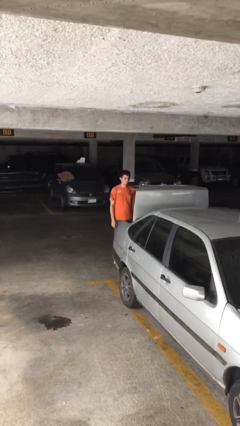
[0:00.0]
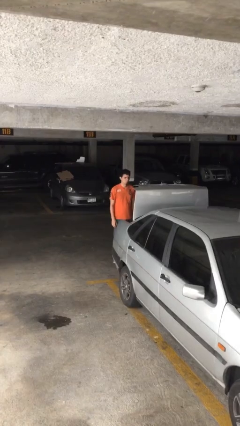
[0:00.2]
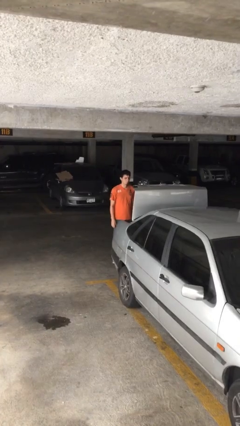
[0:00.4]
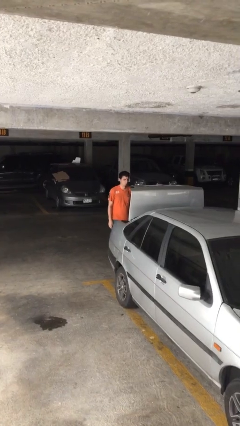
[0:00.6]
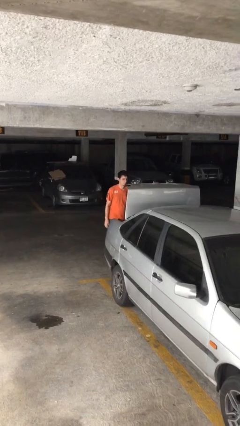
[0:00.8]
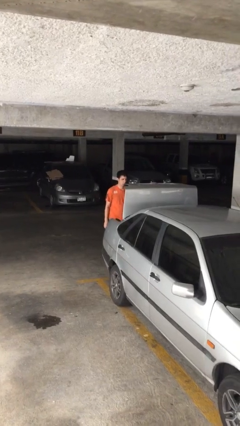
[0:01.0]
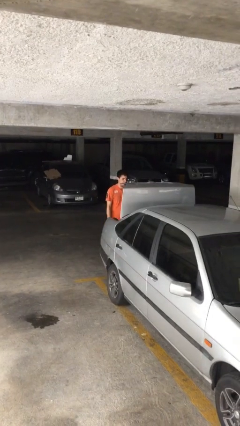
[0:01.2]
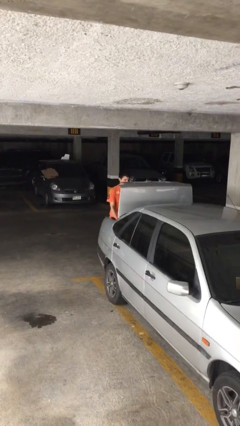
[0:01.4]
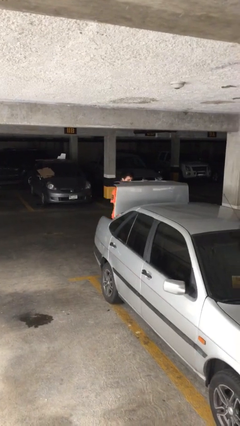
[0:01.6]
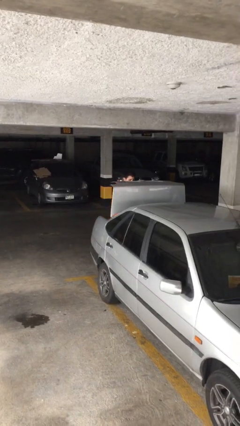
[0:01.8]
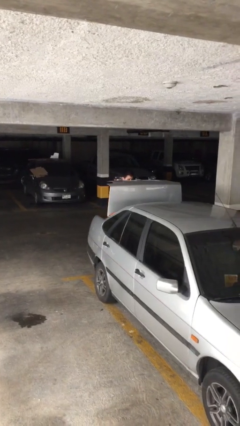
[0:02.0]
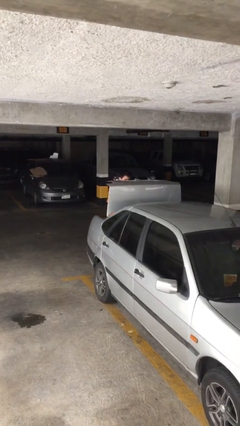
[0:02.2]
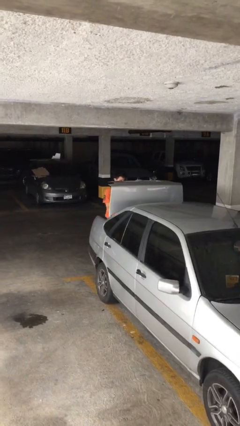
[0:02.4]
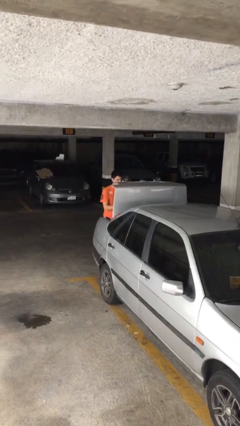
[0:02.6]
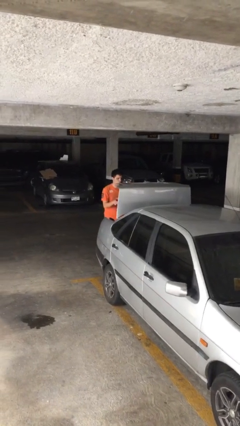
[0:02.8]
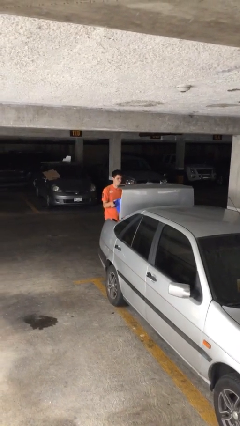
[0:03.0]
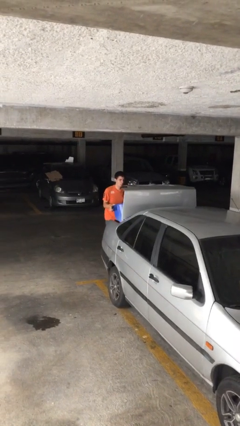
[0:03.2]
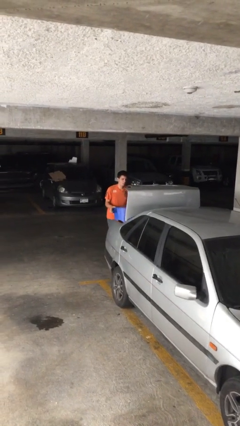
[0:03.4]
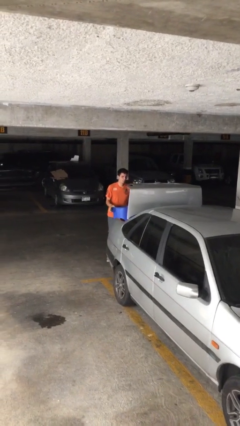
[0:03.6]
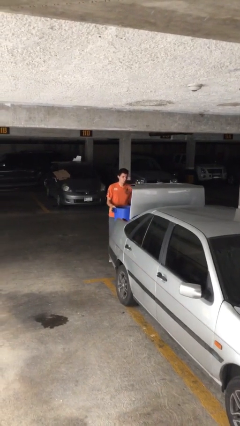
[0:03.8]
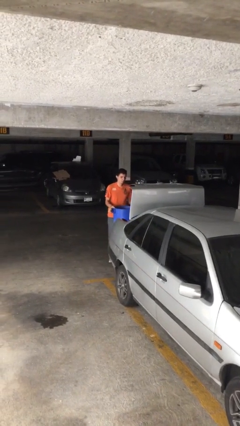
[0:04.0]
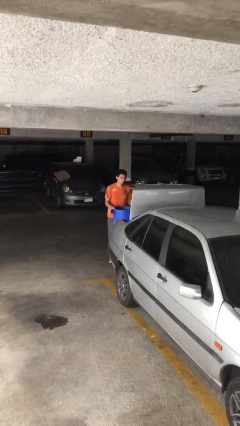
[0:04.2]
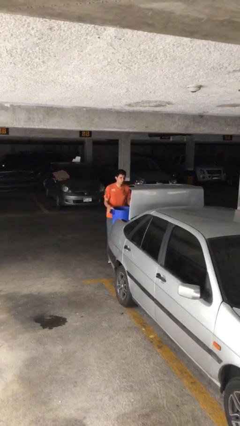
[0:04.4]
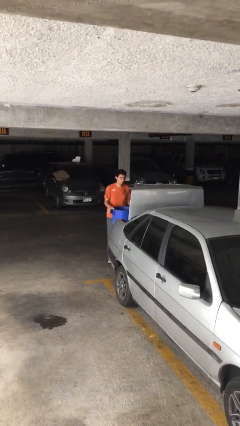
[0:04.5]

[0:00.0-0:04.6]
person unloads car

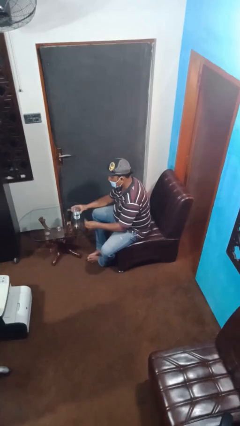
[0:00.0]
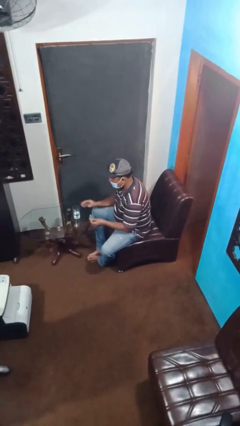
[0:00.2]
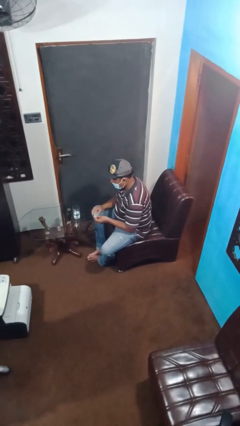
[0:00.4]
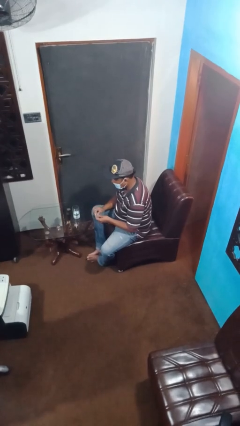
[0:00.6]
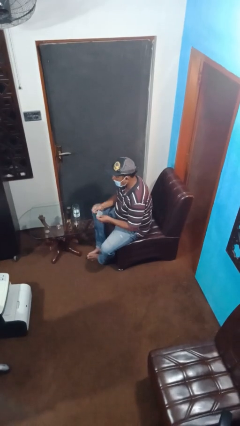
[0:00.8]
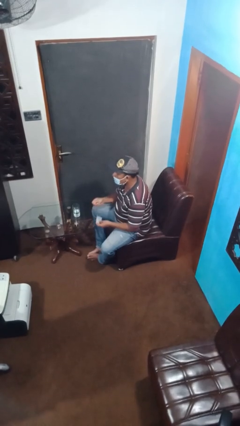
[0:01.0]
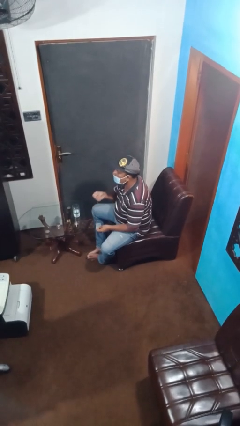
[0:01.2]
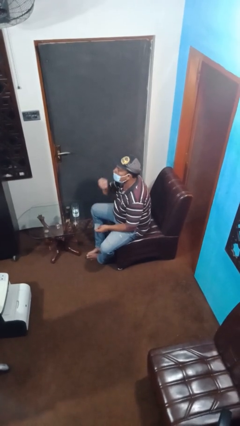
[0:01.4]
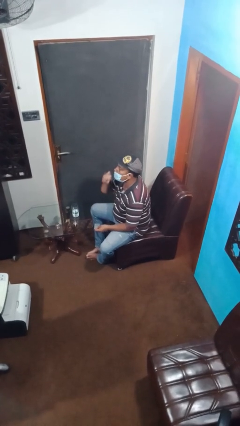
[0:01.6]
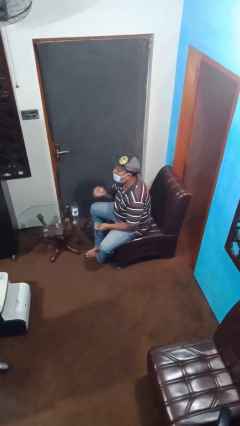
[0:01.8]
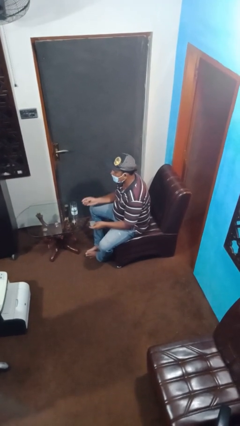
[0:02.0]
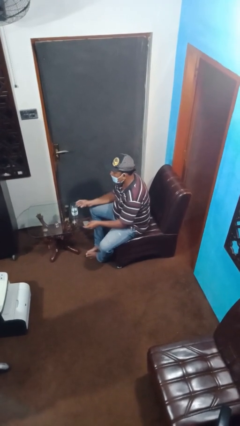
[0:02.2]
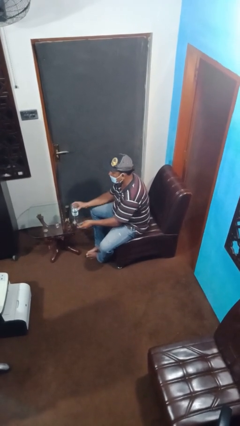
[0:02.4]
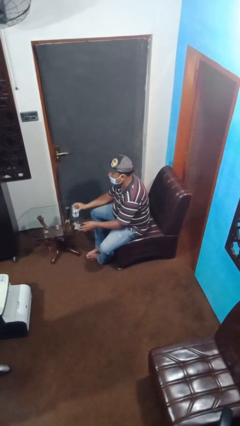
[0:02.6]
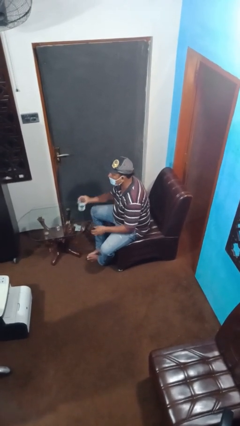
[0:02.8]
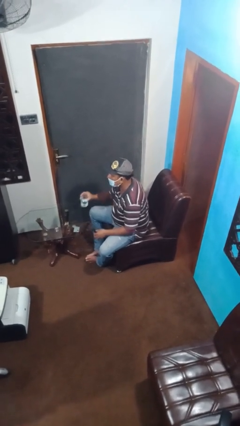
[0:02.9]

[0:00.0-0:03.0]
person takes medicine pills

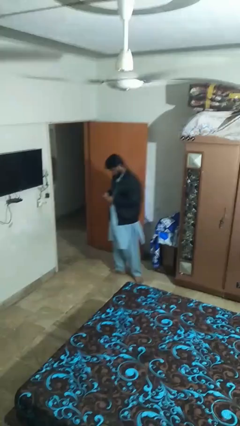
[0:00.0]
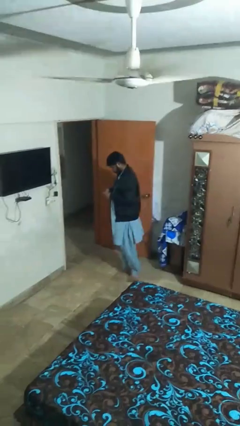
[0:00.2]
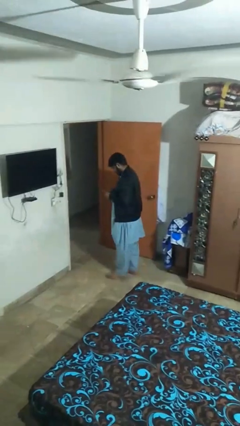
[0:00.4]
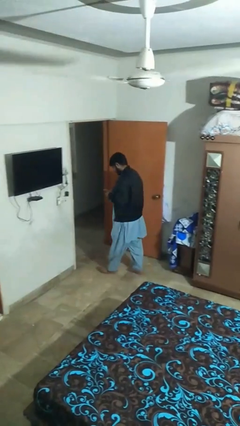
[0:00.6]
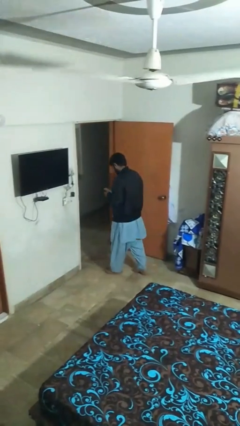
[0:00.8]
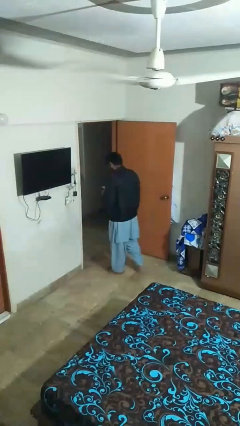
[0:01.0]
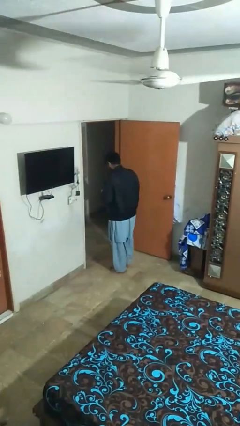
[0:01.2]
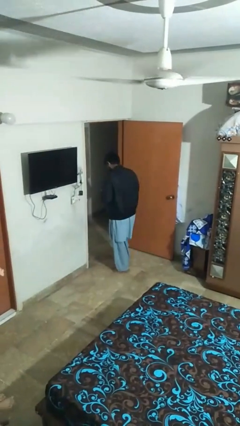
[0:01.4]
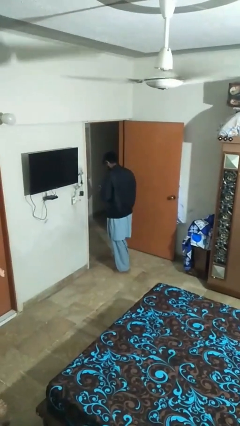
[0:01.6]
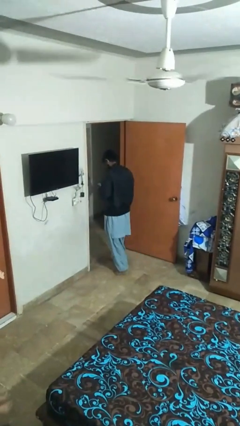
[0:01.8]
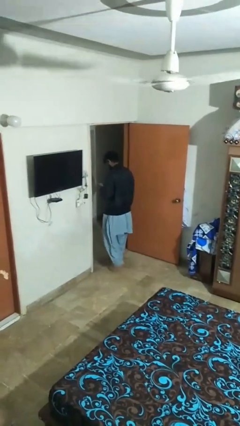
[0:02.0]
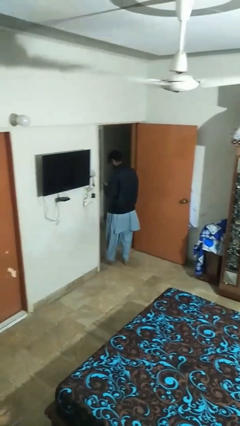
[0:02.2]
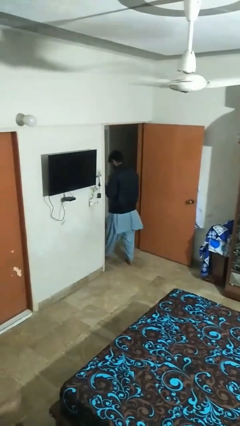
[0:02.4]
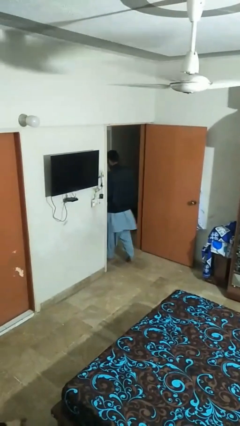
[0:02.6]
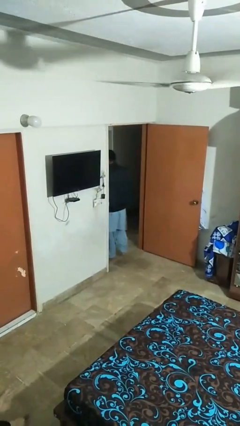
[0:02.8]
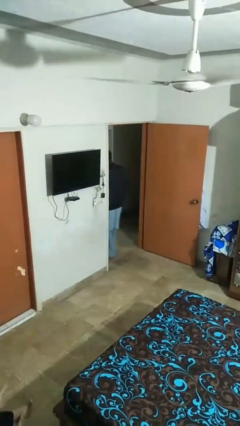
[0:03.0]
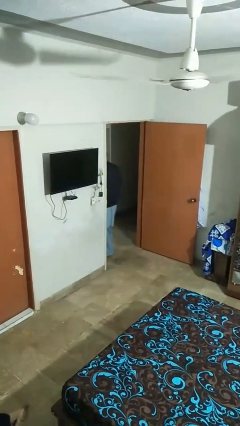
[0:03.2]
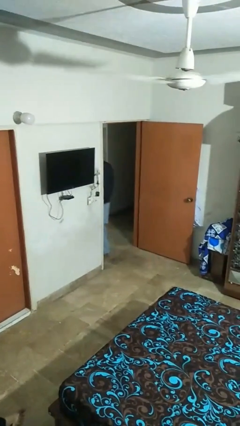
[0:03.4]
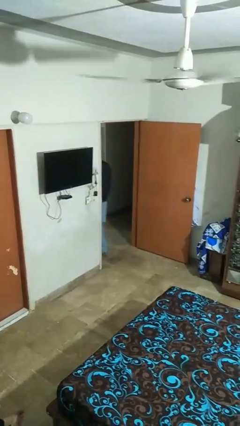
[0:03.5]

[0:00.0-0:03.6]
person exits scene through structure

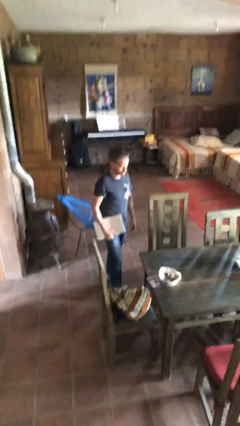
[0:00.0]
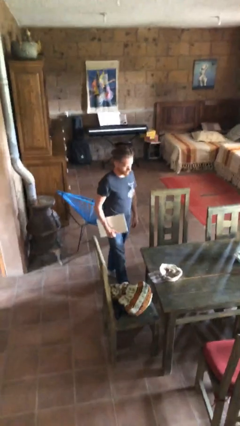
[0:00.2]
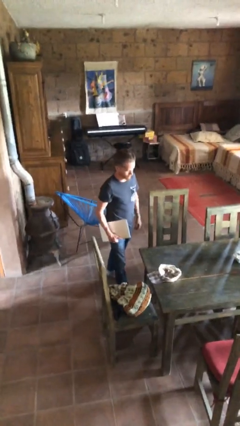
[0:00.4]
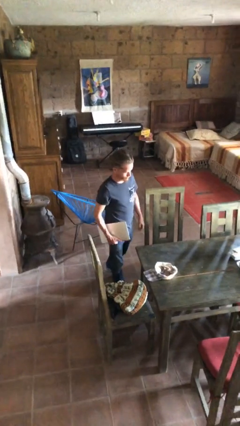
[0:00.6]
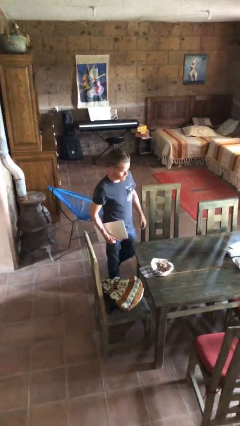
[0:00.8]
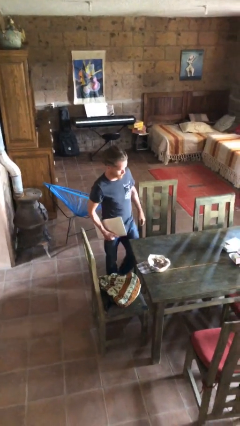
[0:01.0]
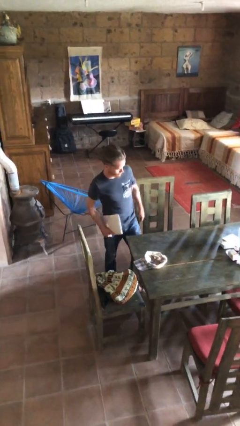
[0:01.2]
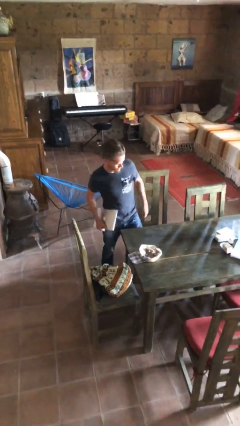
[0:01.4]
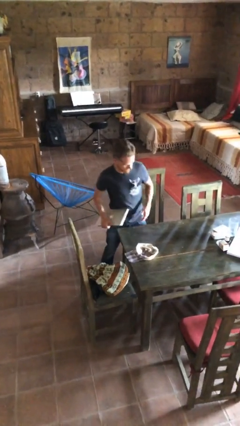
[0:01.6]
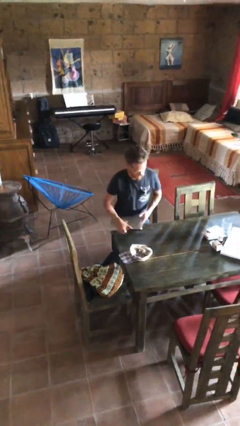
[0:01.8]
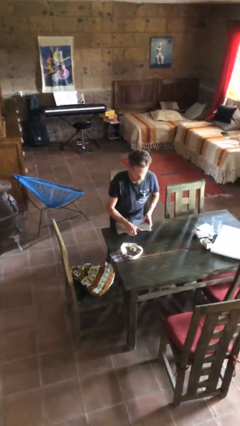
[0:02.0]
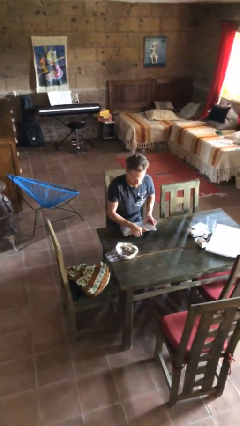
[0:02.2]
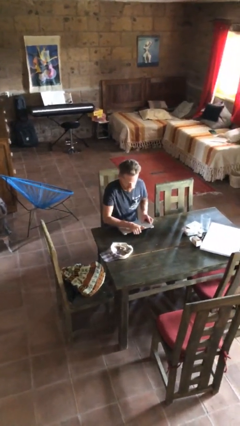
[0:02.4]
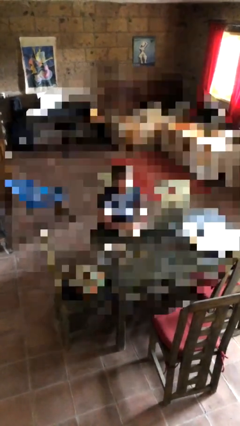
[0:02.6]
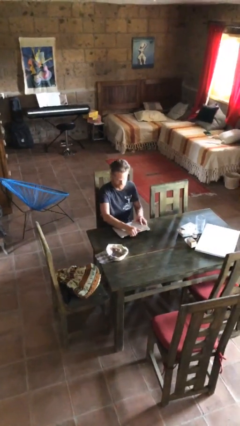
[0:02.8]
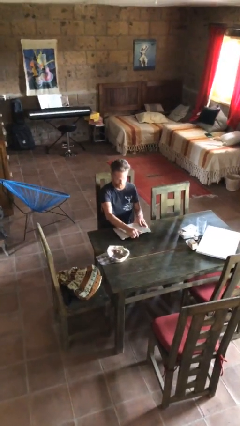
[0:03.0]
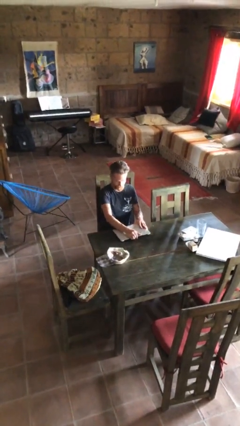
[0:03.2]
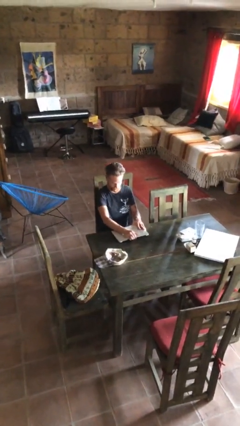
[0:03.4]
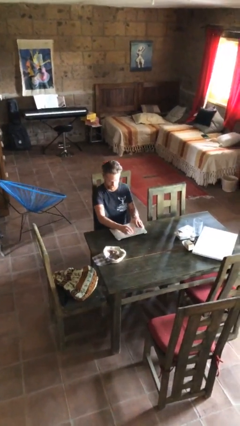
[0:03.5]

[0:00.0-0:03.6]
person sits down

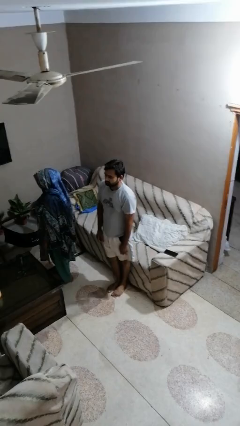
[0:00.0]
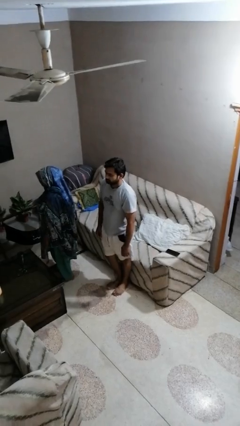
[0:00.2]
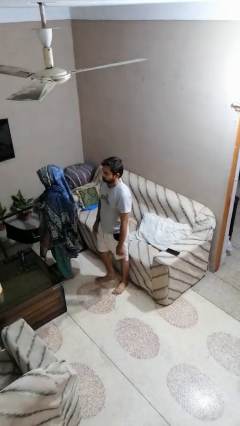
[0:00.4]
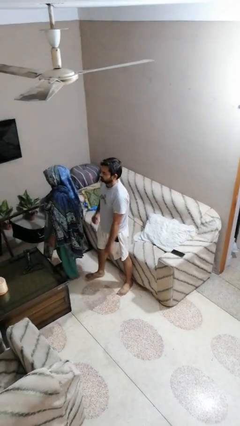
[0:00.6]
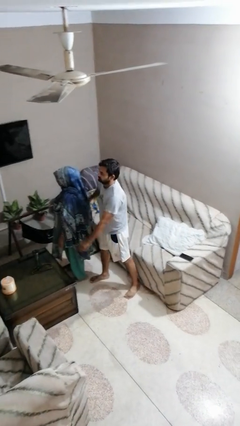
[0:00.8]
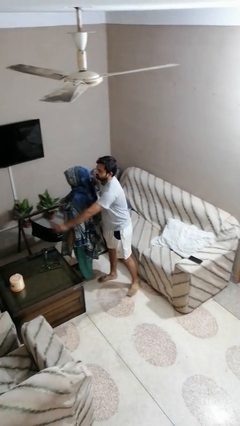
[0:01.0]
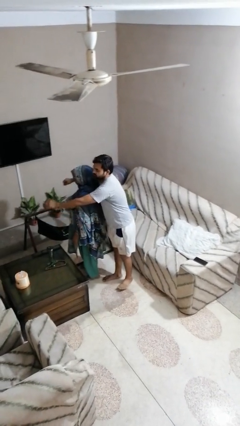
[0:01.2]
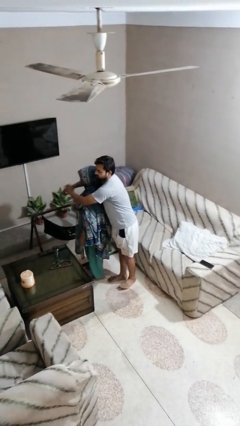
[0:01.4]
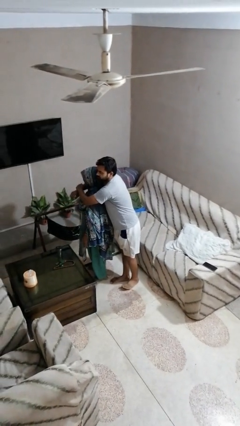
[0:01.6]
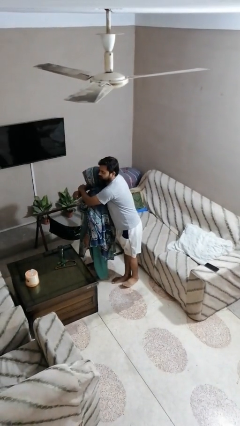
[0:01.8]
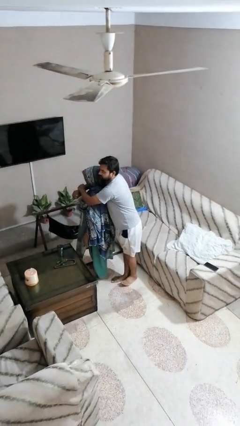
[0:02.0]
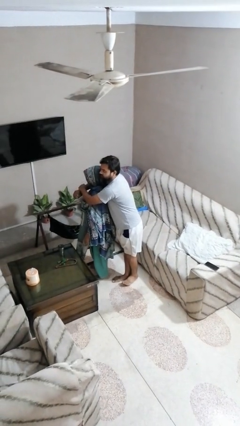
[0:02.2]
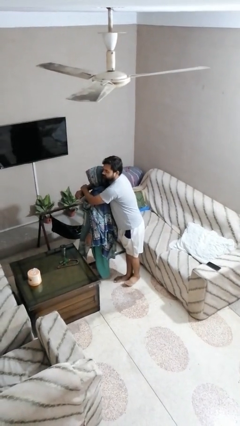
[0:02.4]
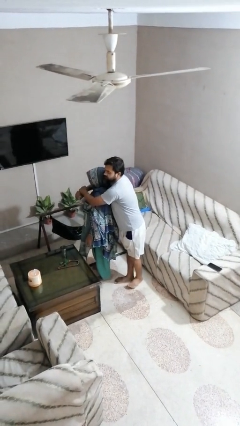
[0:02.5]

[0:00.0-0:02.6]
person hugs person from behind

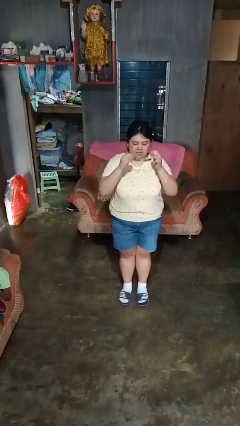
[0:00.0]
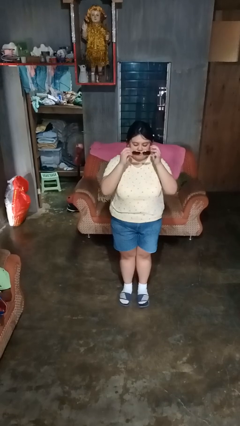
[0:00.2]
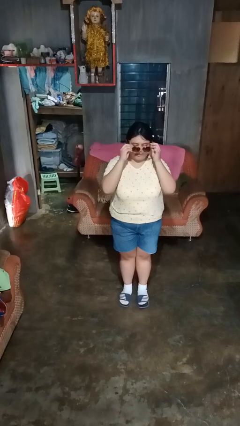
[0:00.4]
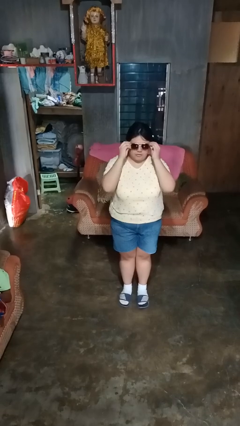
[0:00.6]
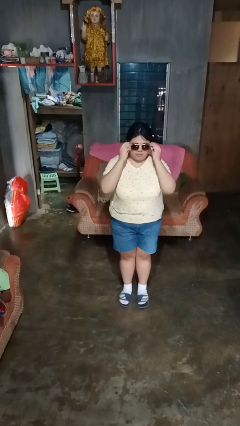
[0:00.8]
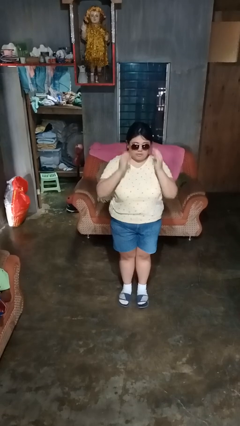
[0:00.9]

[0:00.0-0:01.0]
person puts on sunglasses
